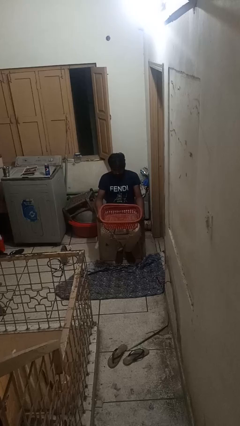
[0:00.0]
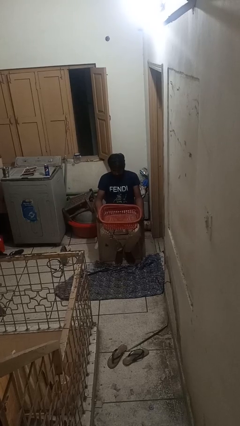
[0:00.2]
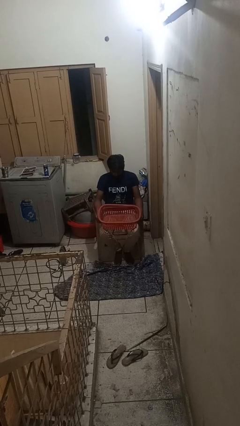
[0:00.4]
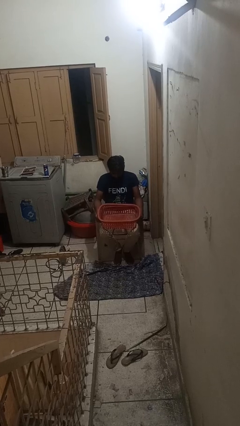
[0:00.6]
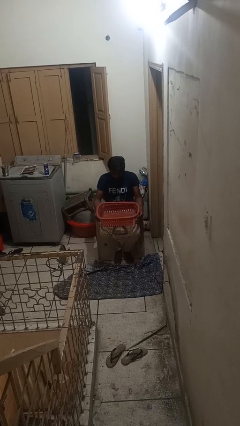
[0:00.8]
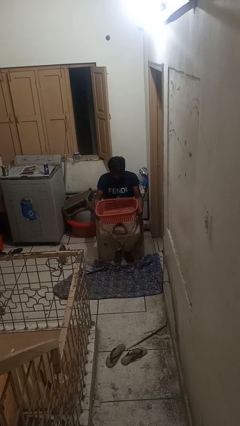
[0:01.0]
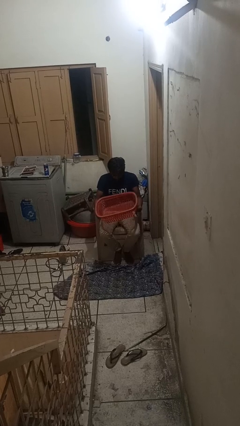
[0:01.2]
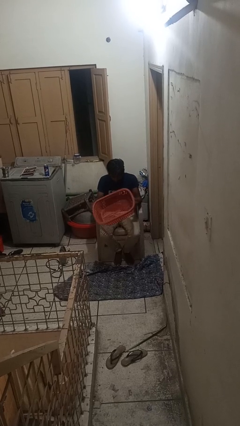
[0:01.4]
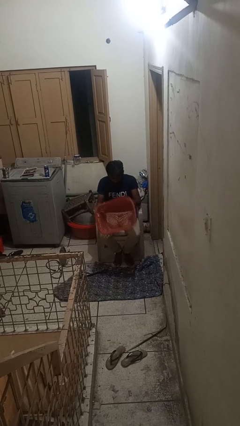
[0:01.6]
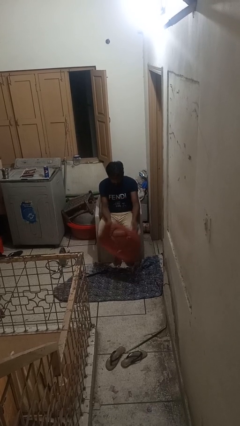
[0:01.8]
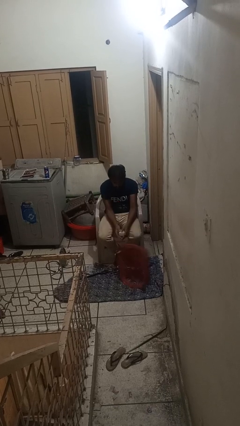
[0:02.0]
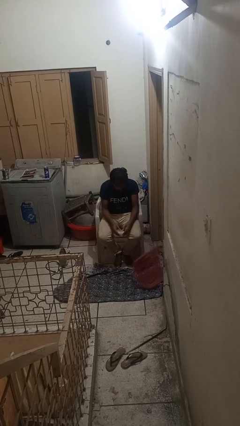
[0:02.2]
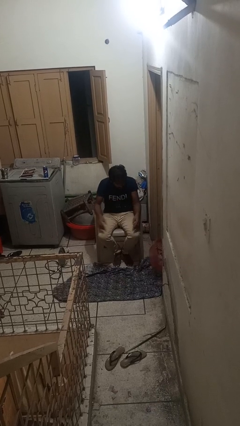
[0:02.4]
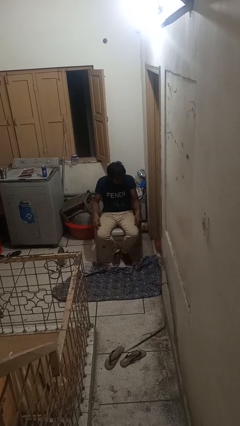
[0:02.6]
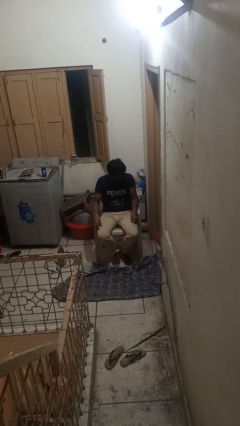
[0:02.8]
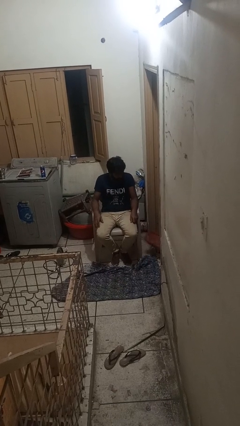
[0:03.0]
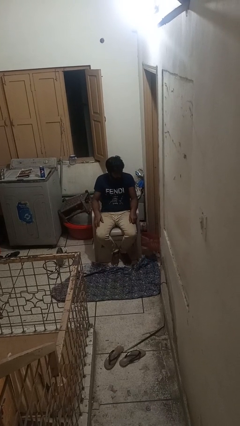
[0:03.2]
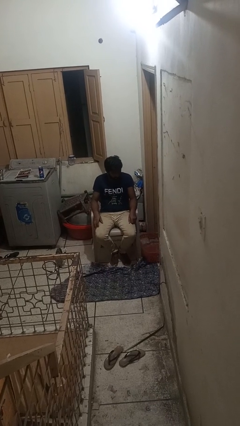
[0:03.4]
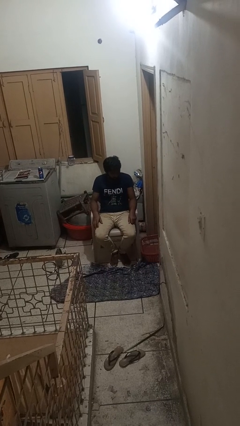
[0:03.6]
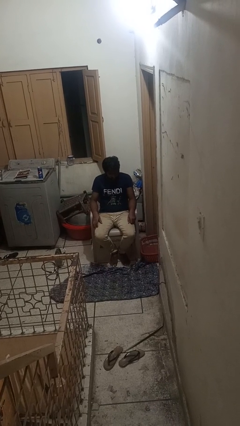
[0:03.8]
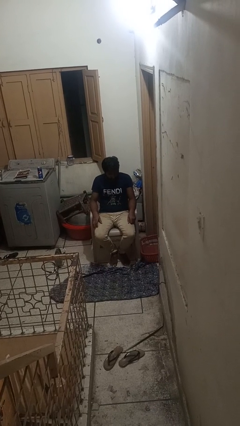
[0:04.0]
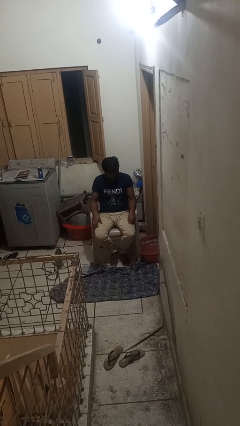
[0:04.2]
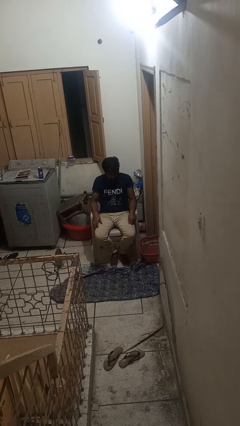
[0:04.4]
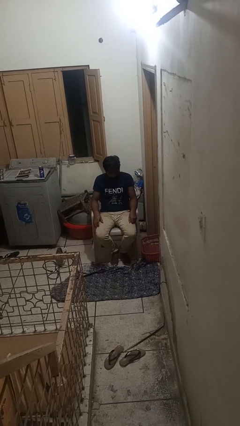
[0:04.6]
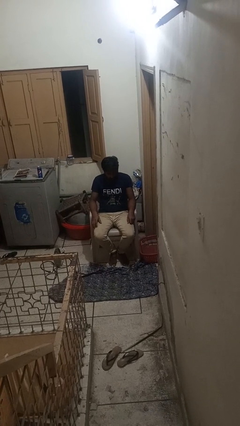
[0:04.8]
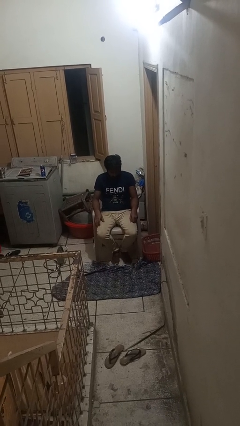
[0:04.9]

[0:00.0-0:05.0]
person drops object

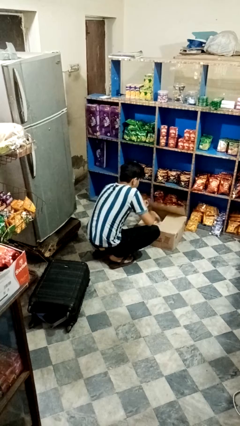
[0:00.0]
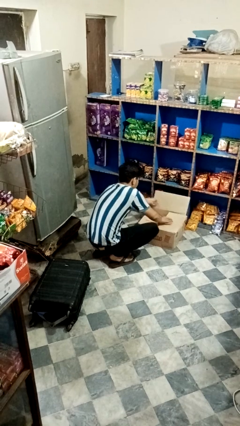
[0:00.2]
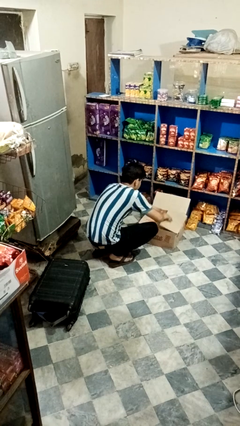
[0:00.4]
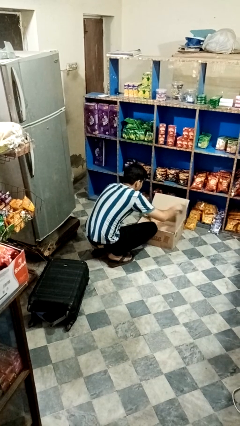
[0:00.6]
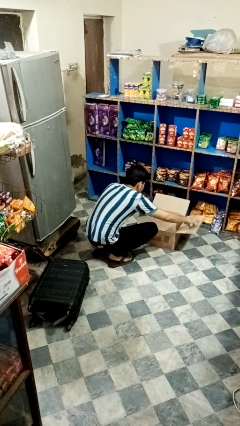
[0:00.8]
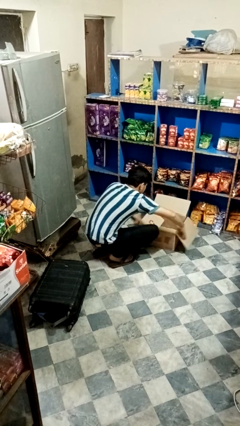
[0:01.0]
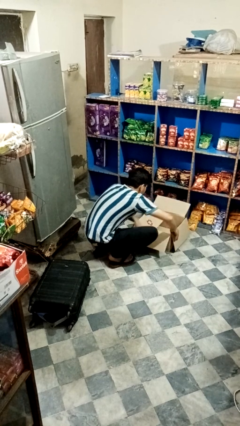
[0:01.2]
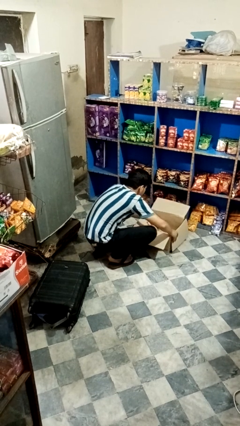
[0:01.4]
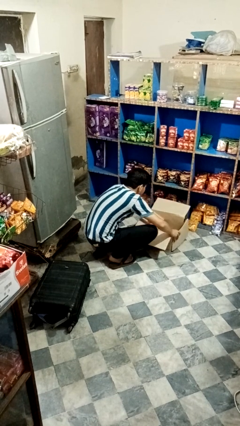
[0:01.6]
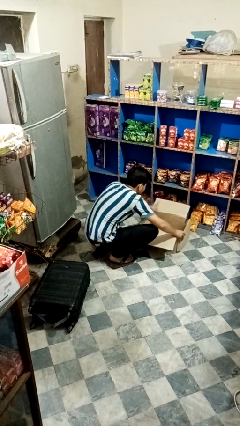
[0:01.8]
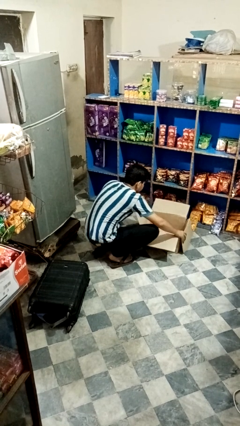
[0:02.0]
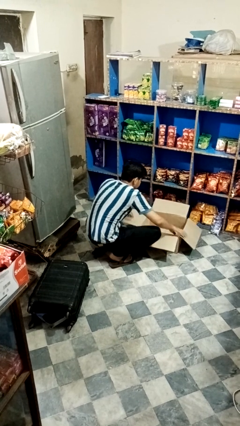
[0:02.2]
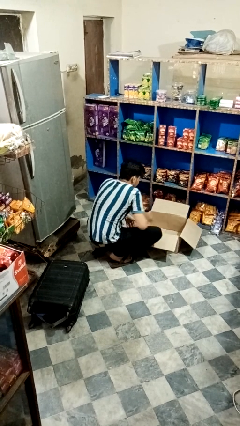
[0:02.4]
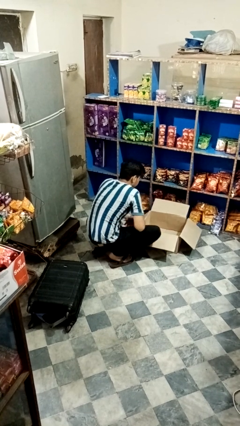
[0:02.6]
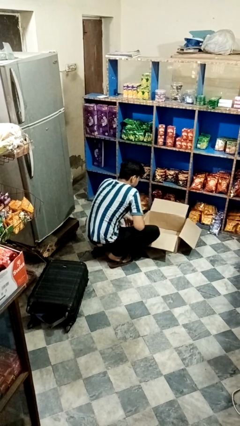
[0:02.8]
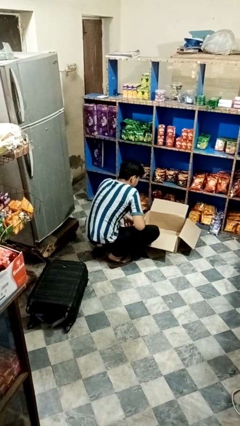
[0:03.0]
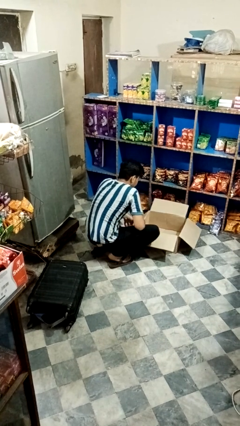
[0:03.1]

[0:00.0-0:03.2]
person opens box

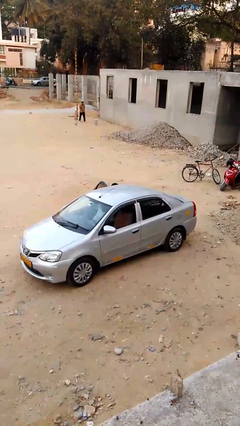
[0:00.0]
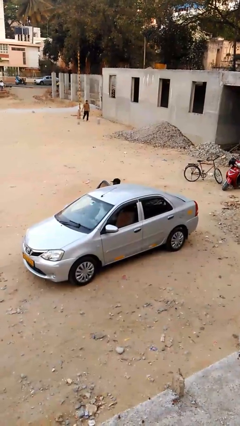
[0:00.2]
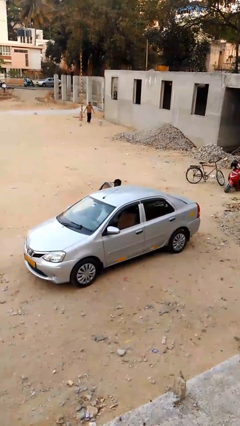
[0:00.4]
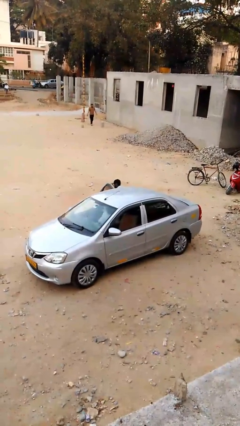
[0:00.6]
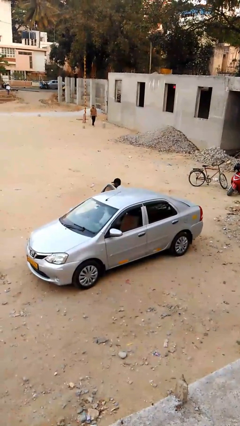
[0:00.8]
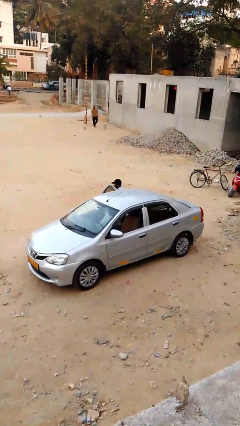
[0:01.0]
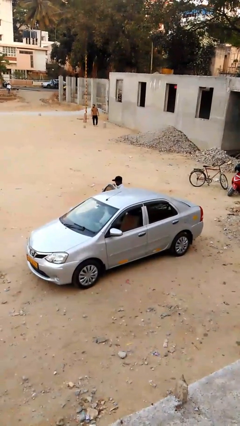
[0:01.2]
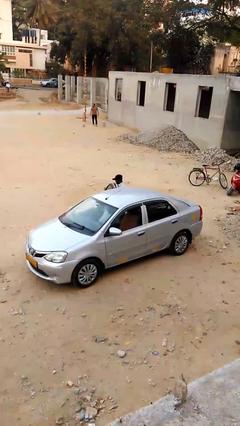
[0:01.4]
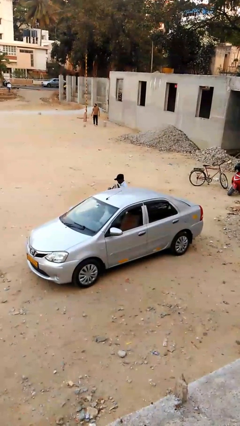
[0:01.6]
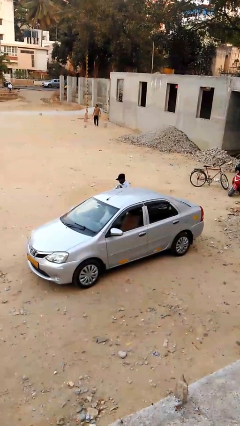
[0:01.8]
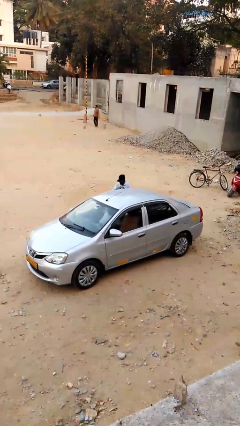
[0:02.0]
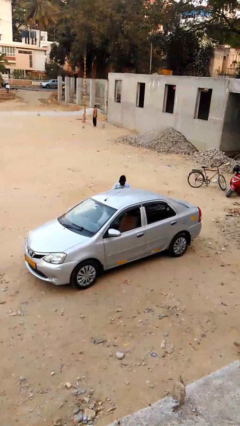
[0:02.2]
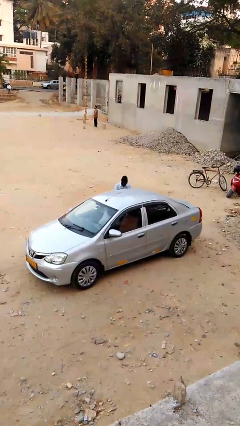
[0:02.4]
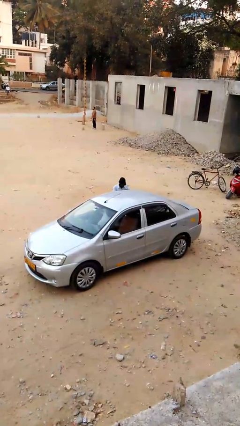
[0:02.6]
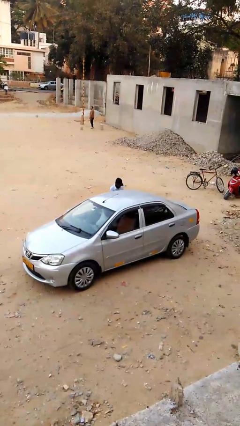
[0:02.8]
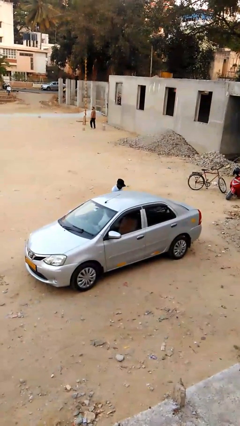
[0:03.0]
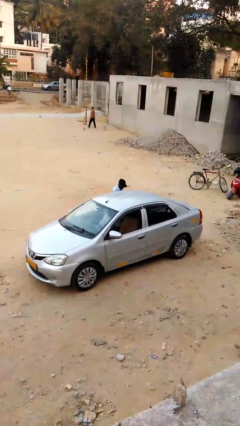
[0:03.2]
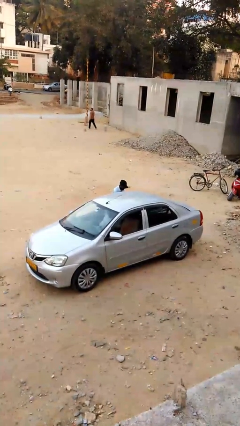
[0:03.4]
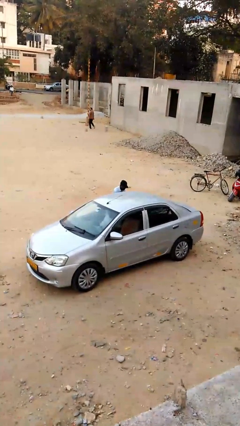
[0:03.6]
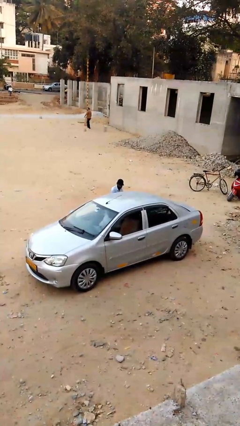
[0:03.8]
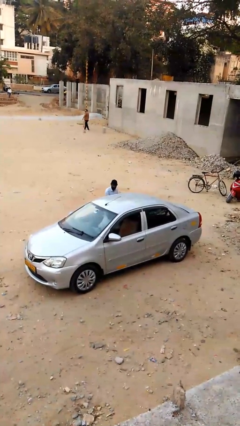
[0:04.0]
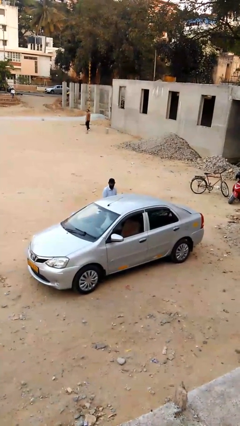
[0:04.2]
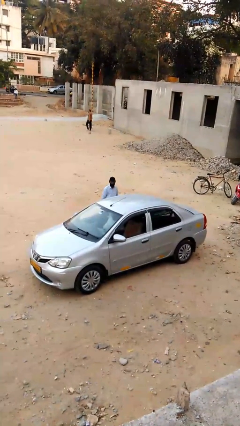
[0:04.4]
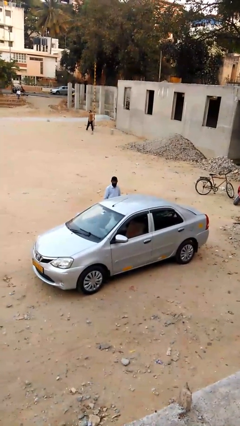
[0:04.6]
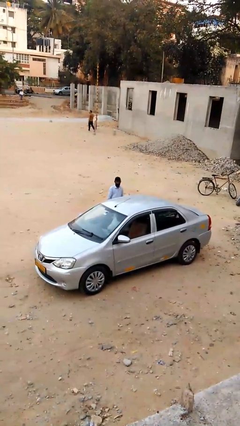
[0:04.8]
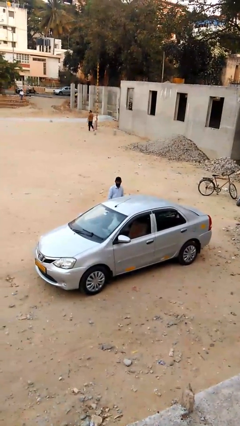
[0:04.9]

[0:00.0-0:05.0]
person exits car

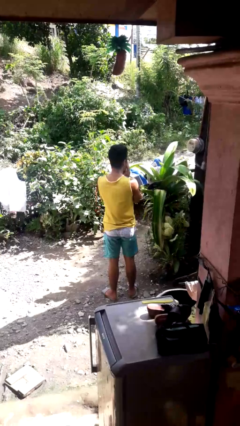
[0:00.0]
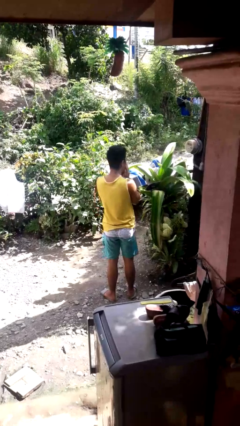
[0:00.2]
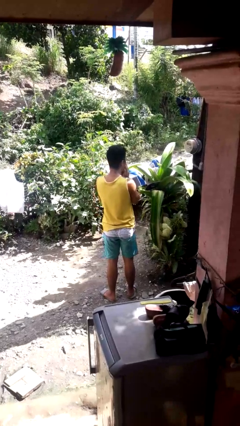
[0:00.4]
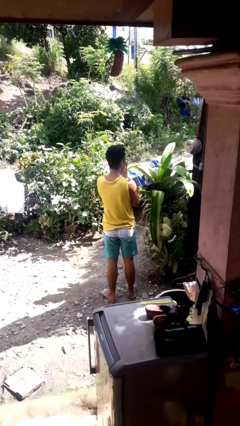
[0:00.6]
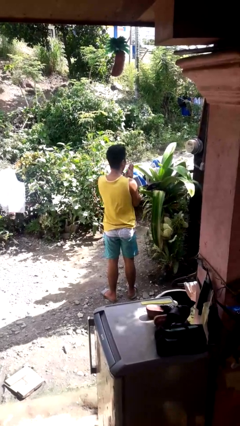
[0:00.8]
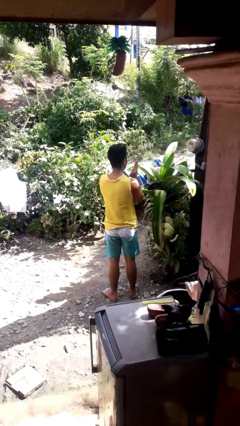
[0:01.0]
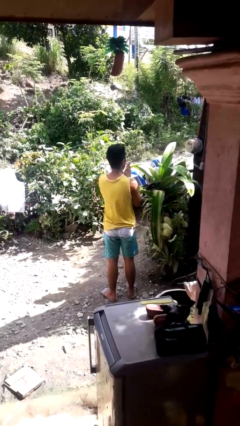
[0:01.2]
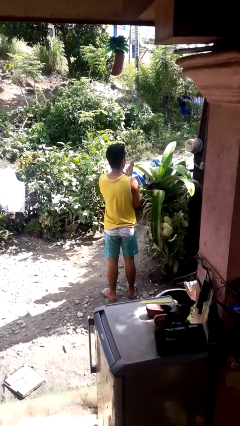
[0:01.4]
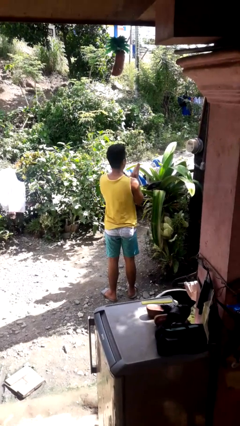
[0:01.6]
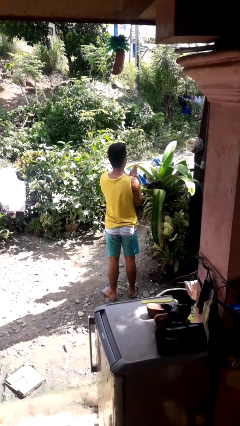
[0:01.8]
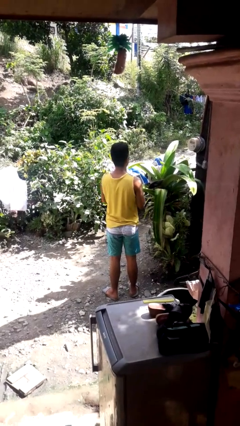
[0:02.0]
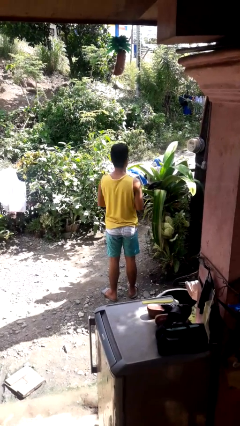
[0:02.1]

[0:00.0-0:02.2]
person blows into hands

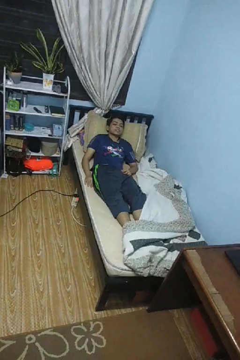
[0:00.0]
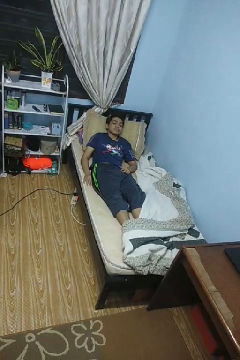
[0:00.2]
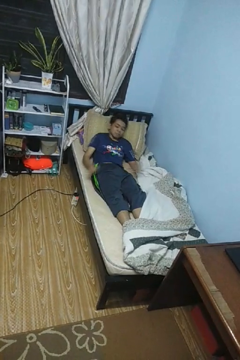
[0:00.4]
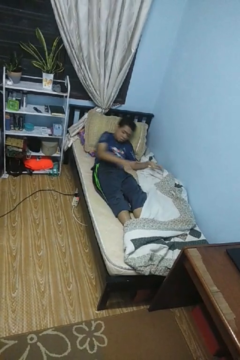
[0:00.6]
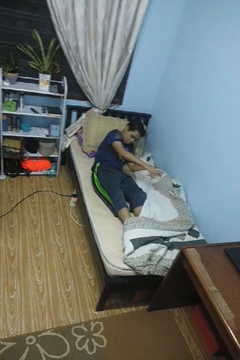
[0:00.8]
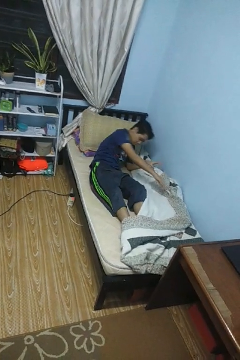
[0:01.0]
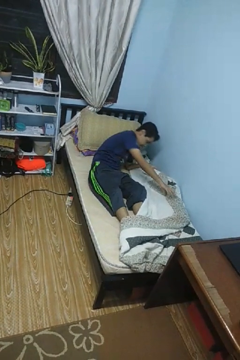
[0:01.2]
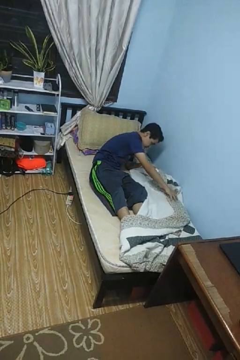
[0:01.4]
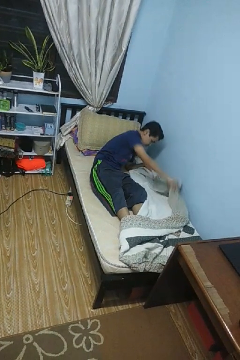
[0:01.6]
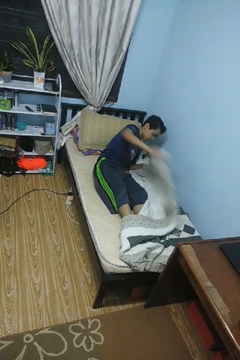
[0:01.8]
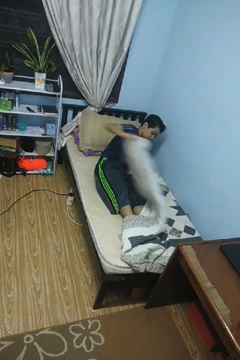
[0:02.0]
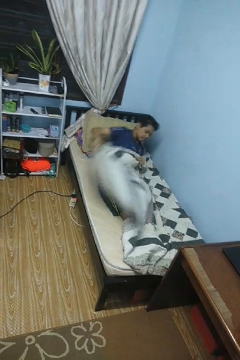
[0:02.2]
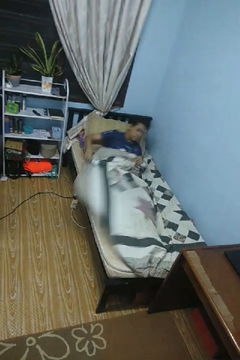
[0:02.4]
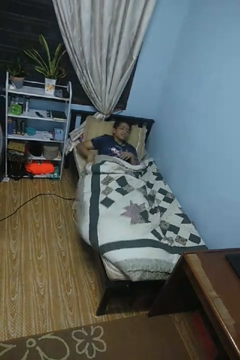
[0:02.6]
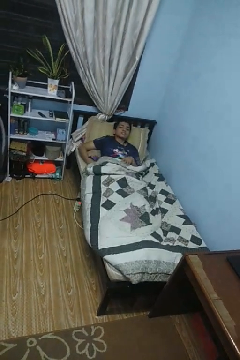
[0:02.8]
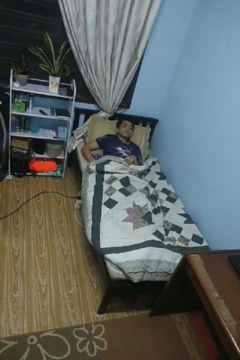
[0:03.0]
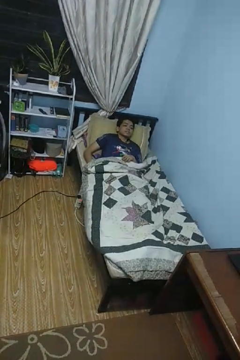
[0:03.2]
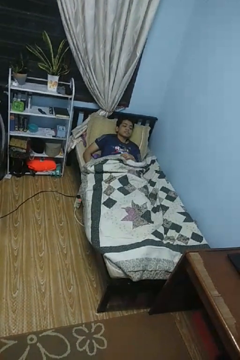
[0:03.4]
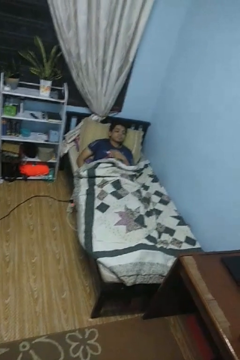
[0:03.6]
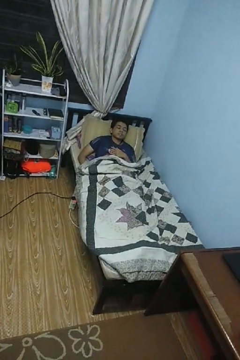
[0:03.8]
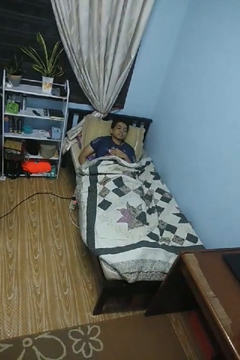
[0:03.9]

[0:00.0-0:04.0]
person covers with bedsheets
